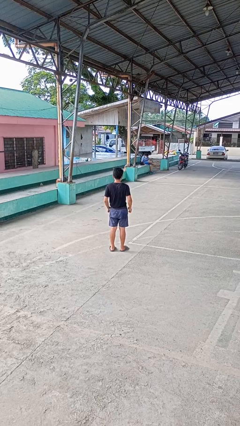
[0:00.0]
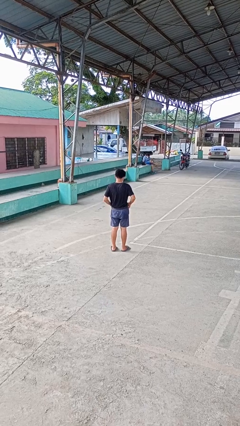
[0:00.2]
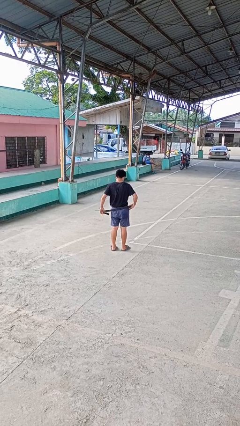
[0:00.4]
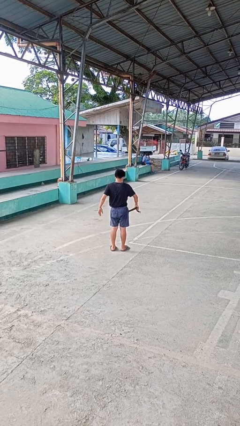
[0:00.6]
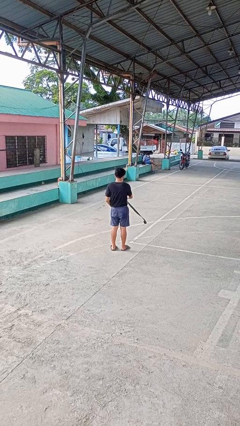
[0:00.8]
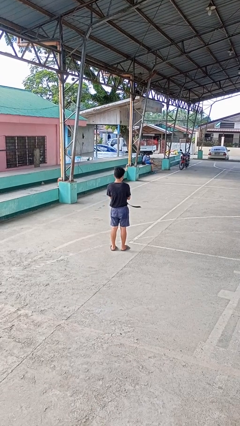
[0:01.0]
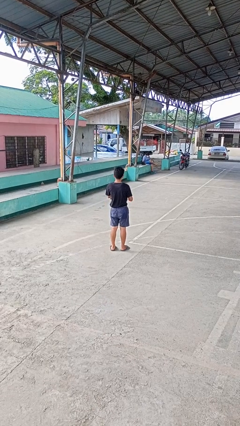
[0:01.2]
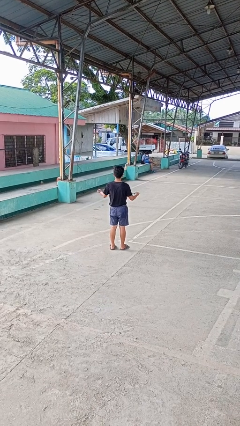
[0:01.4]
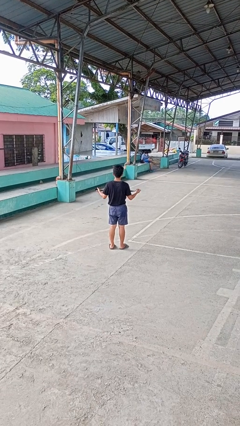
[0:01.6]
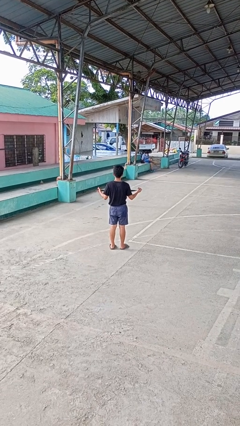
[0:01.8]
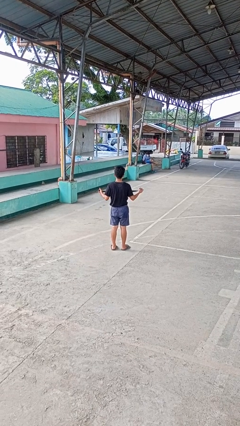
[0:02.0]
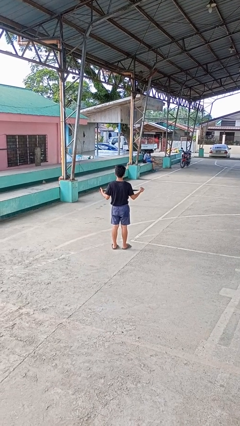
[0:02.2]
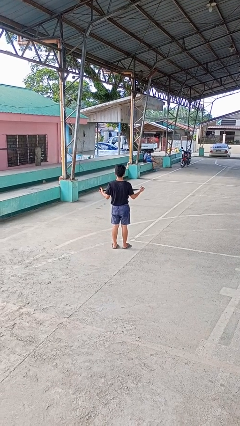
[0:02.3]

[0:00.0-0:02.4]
person takes off belt

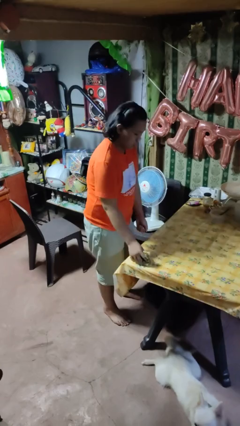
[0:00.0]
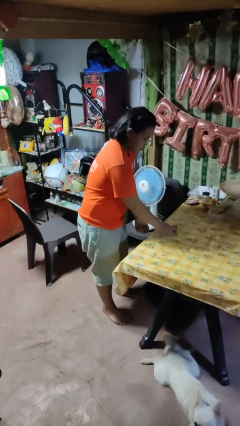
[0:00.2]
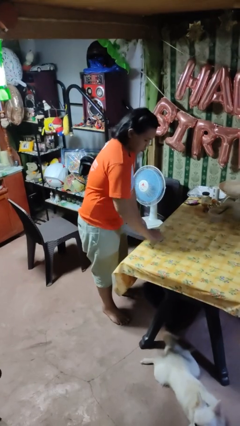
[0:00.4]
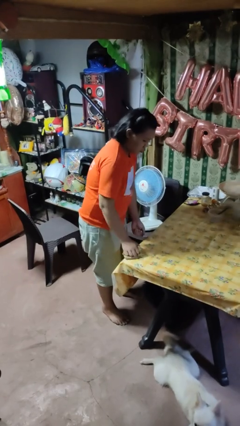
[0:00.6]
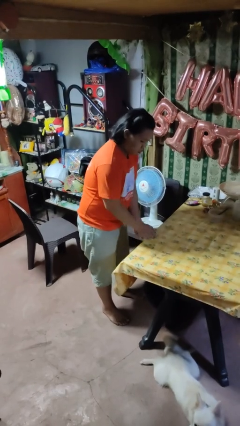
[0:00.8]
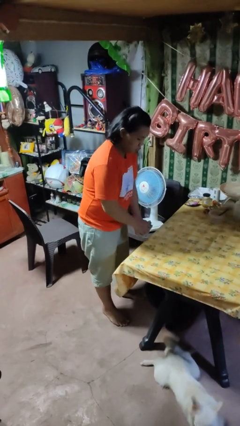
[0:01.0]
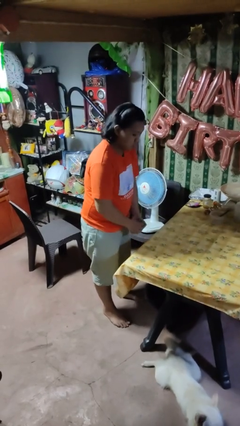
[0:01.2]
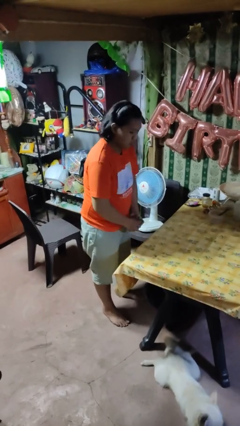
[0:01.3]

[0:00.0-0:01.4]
person cleans table with rag

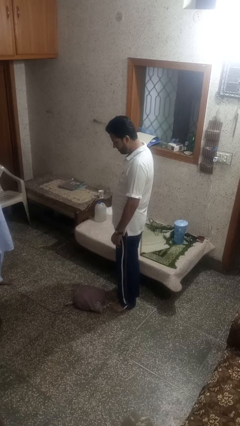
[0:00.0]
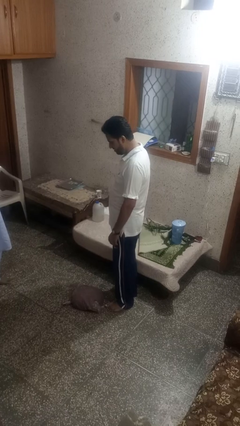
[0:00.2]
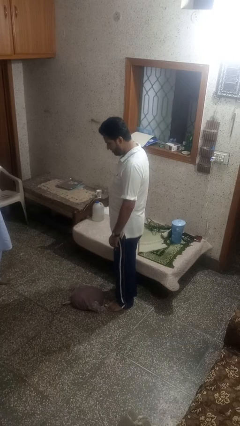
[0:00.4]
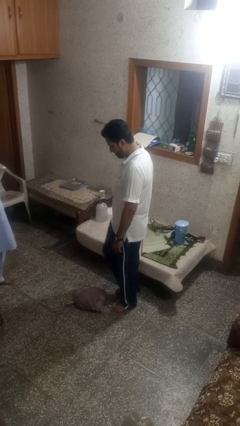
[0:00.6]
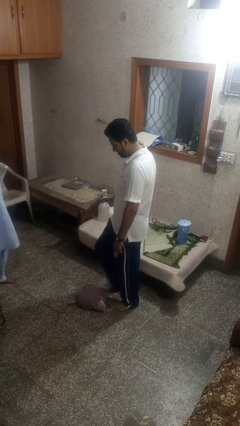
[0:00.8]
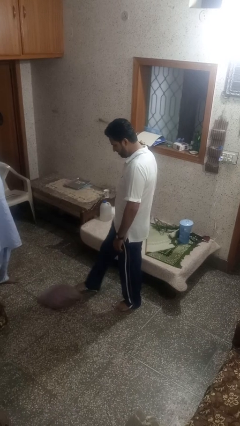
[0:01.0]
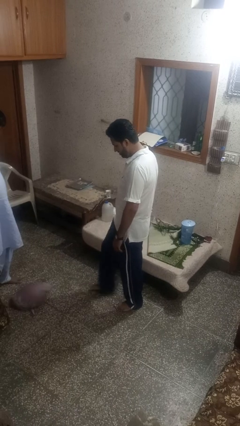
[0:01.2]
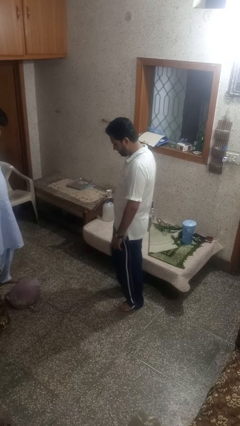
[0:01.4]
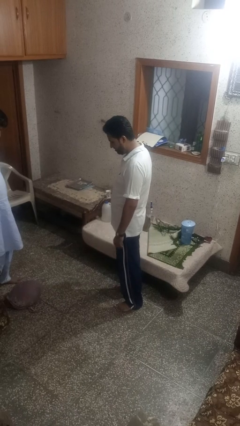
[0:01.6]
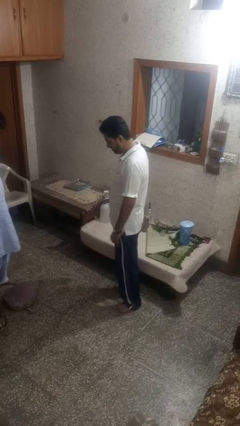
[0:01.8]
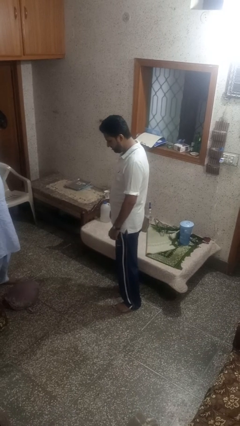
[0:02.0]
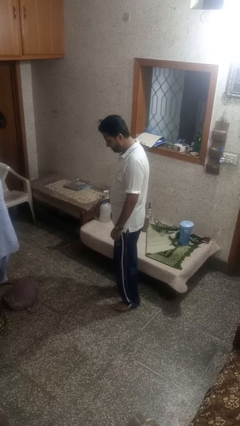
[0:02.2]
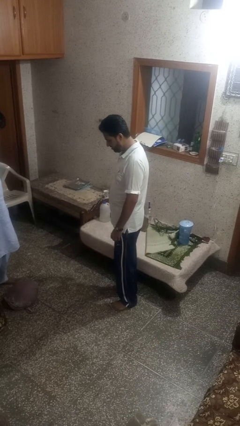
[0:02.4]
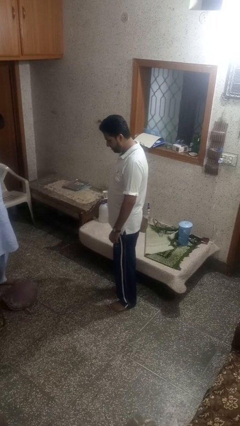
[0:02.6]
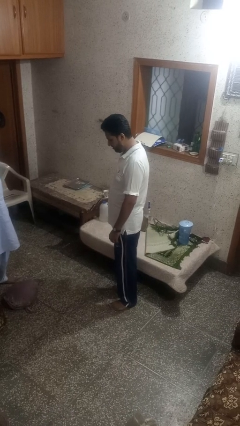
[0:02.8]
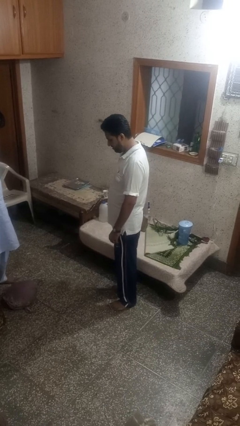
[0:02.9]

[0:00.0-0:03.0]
person kicks object to person

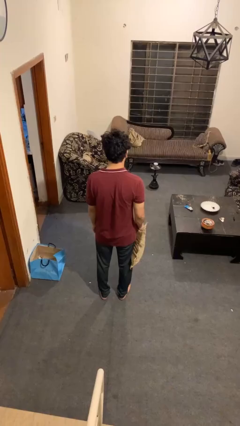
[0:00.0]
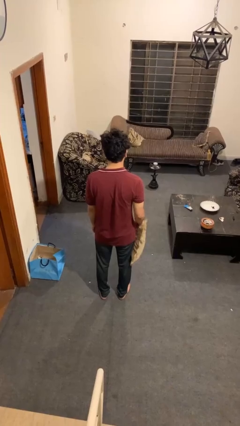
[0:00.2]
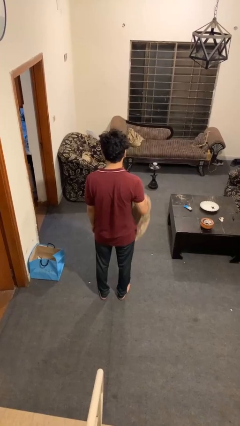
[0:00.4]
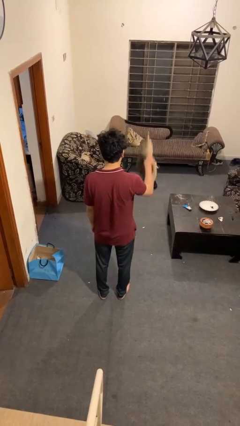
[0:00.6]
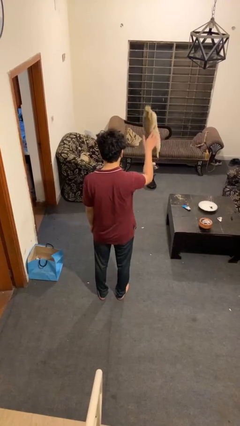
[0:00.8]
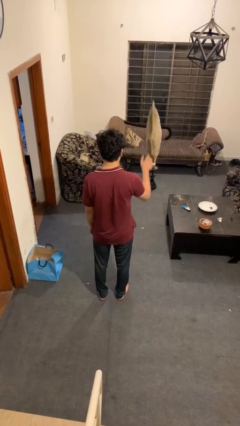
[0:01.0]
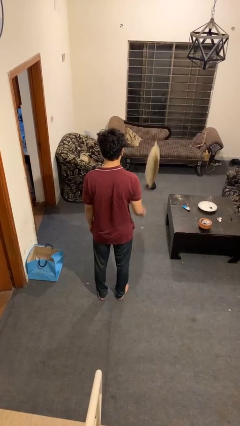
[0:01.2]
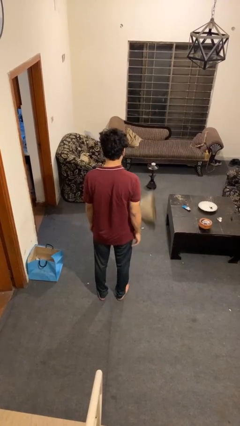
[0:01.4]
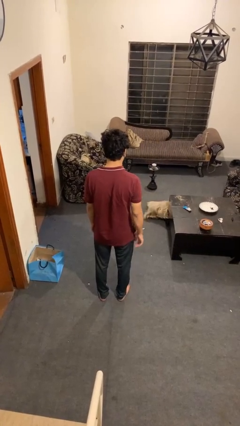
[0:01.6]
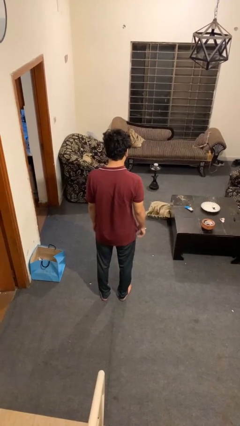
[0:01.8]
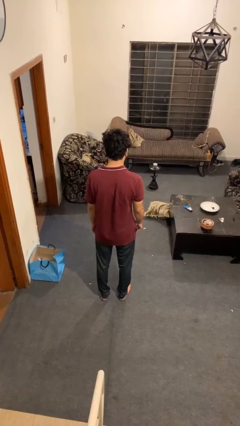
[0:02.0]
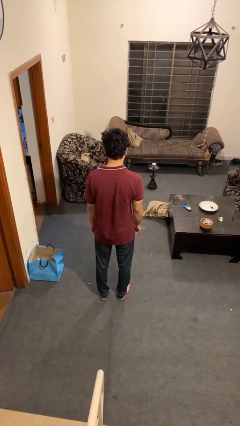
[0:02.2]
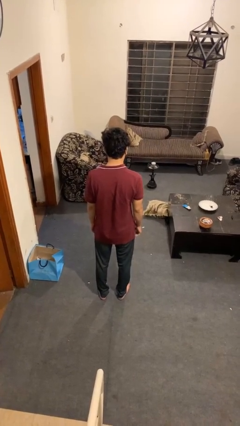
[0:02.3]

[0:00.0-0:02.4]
person throws object into air

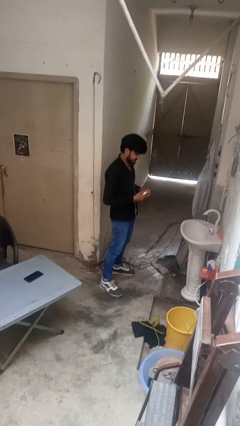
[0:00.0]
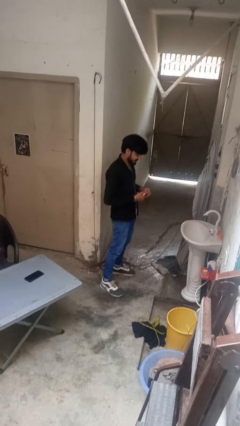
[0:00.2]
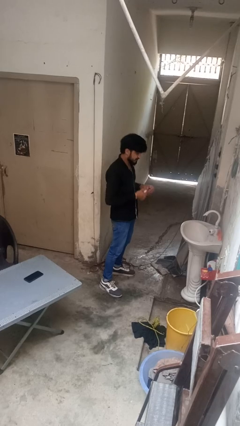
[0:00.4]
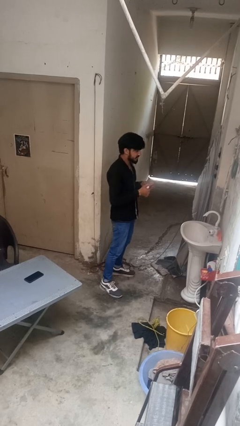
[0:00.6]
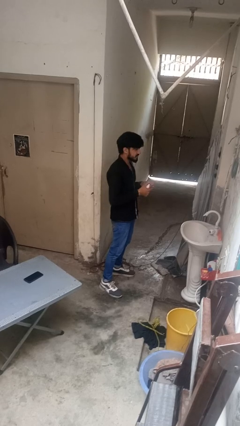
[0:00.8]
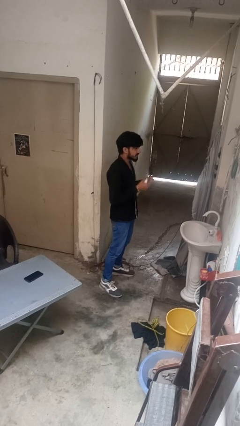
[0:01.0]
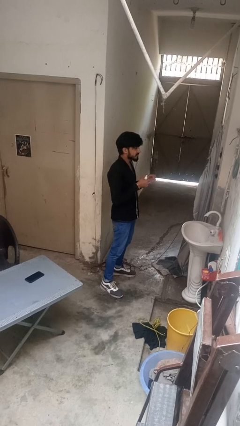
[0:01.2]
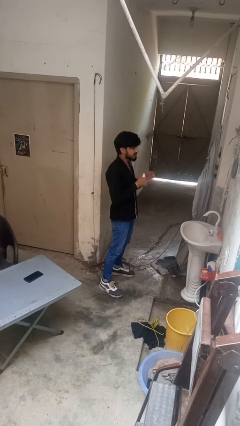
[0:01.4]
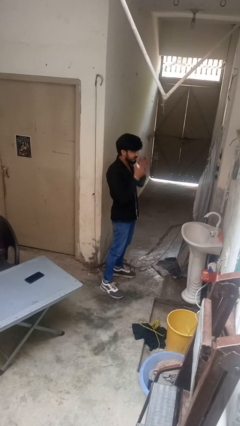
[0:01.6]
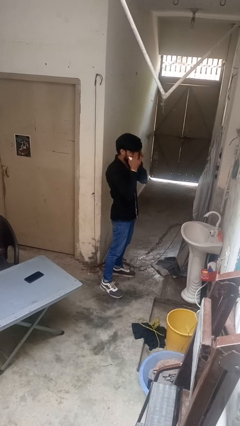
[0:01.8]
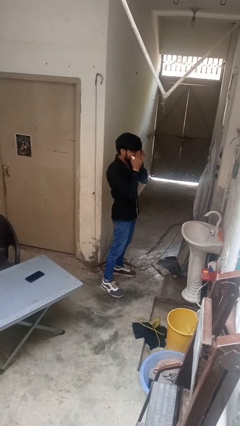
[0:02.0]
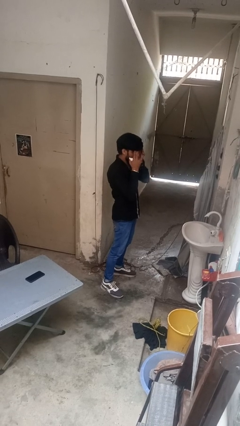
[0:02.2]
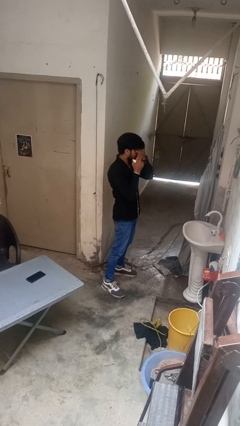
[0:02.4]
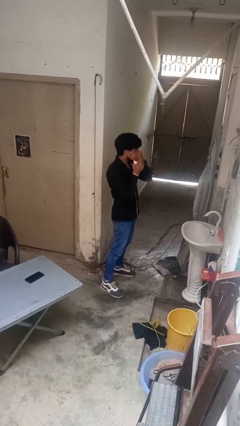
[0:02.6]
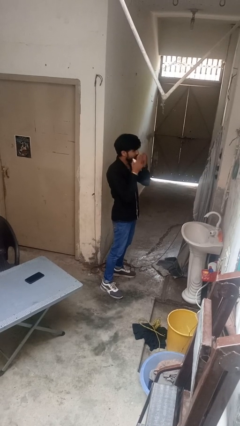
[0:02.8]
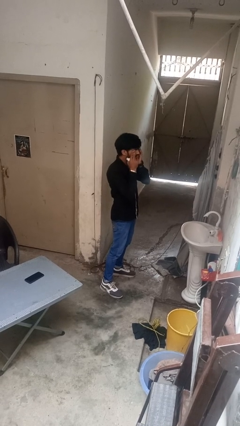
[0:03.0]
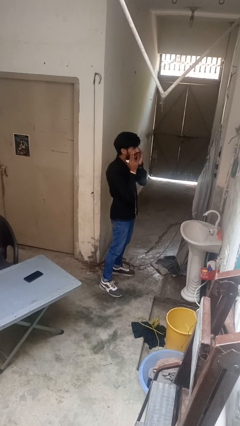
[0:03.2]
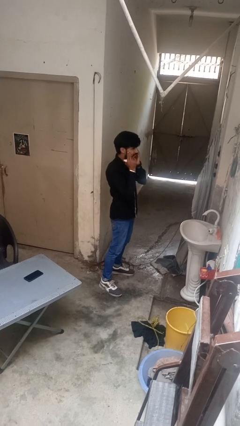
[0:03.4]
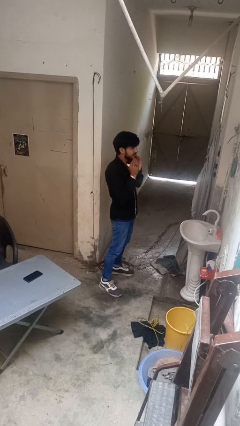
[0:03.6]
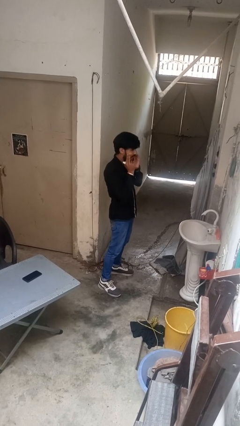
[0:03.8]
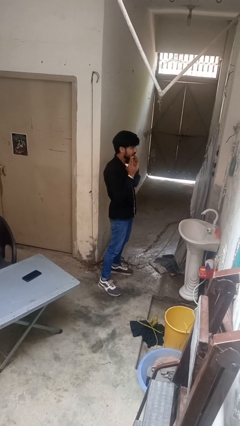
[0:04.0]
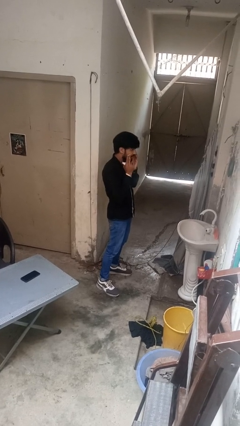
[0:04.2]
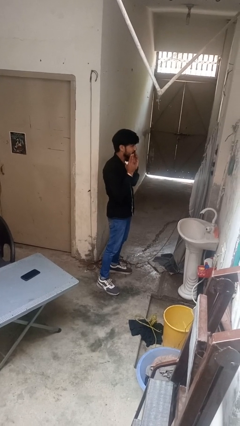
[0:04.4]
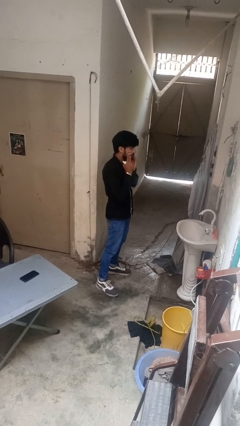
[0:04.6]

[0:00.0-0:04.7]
person applies foundation makeup

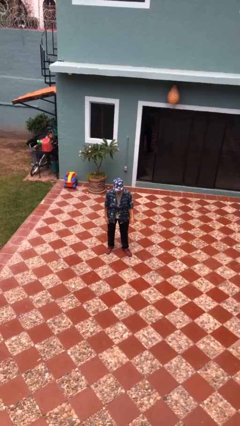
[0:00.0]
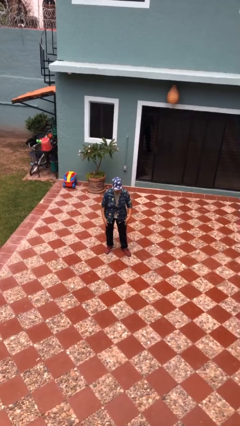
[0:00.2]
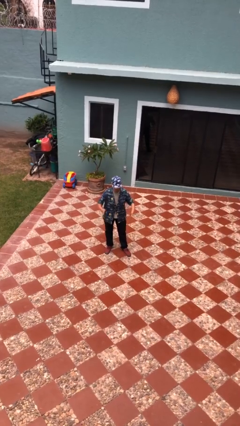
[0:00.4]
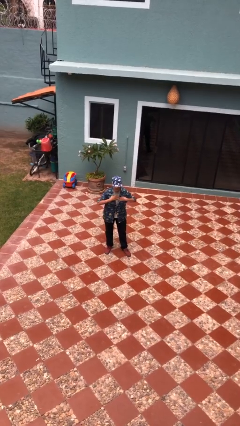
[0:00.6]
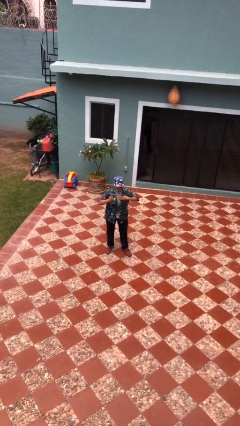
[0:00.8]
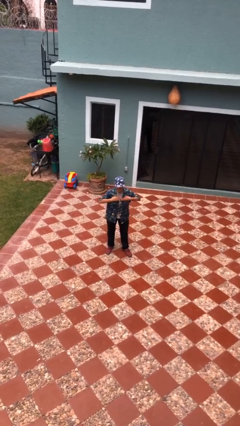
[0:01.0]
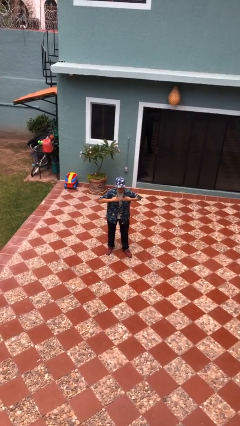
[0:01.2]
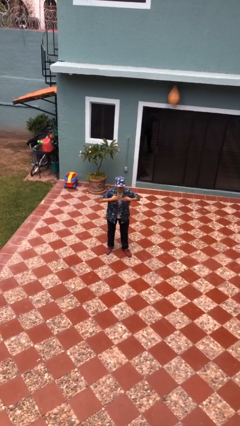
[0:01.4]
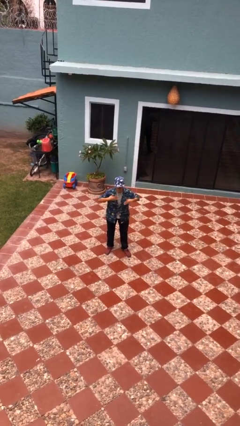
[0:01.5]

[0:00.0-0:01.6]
person drums on chest

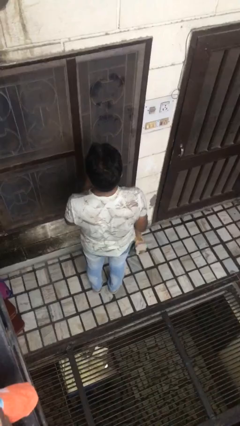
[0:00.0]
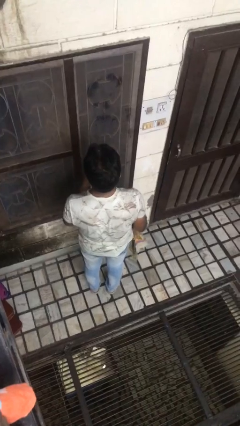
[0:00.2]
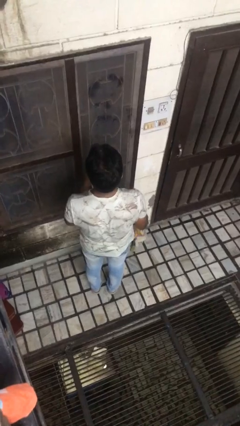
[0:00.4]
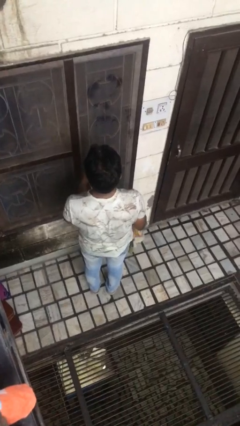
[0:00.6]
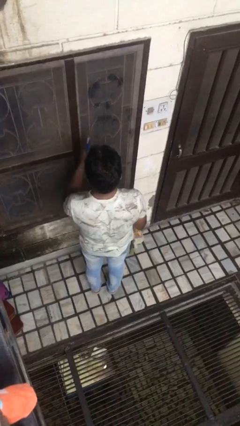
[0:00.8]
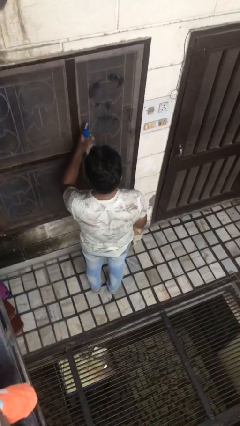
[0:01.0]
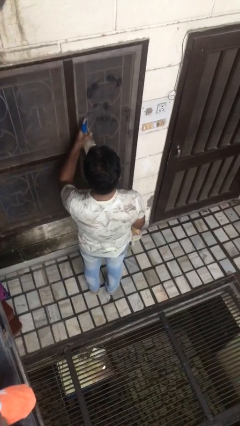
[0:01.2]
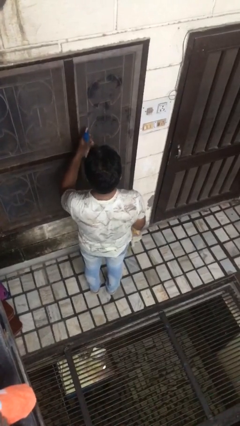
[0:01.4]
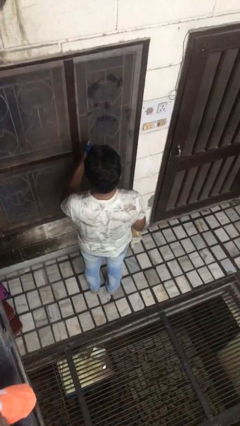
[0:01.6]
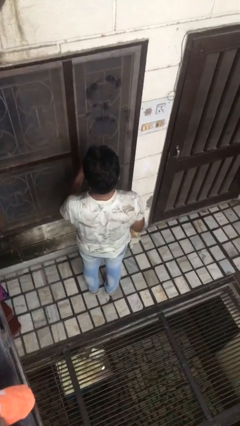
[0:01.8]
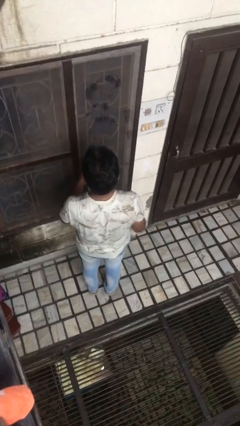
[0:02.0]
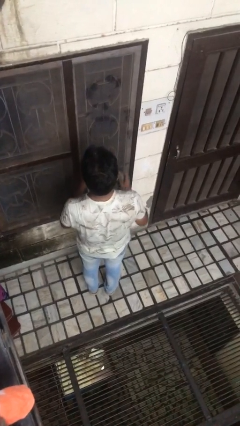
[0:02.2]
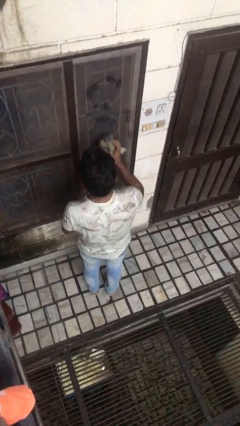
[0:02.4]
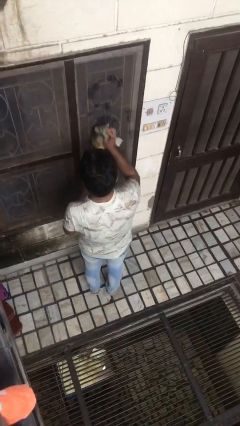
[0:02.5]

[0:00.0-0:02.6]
person sprays from bottle
